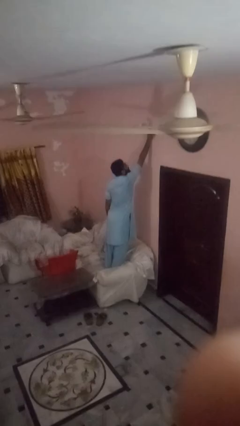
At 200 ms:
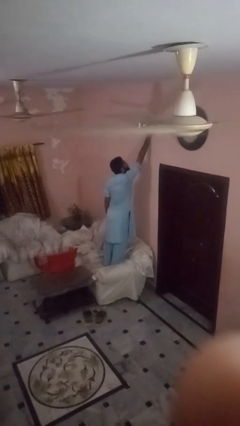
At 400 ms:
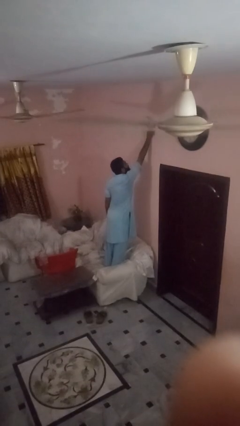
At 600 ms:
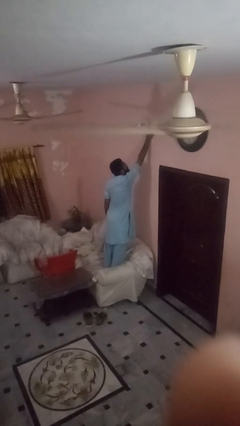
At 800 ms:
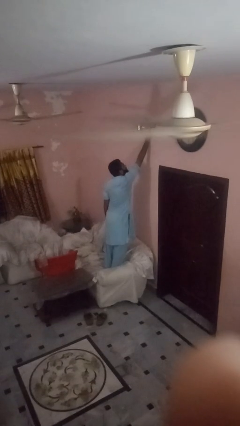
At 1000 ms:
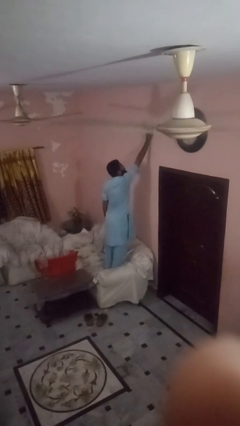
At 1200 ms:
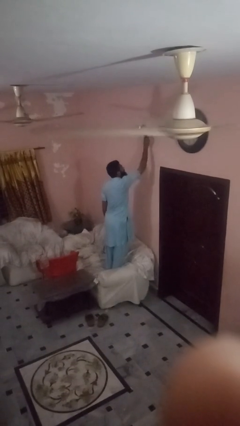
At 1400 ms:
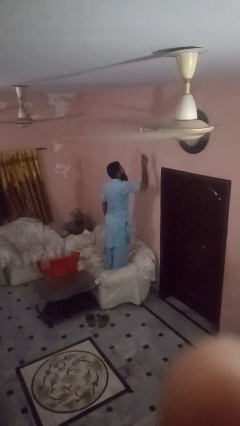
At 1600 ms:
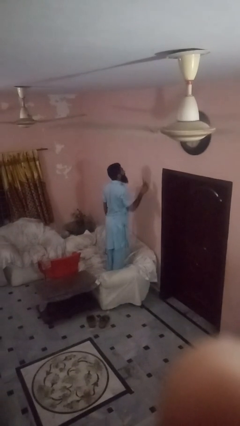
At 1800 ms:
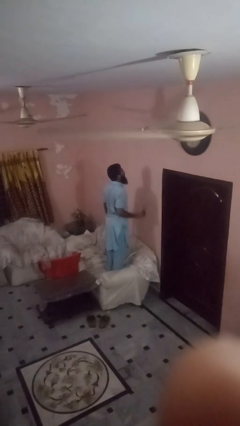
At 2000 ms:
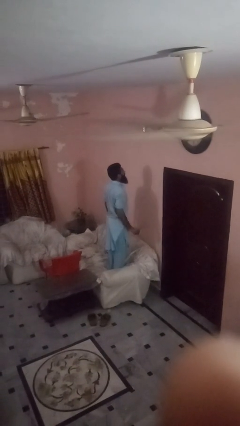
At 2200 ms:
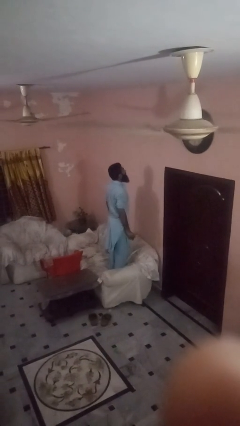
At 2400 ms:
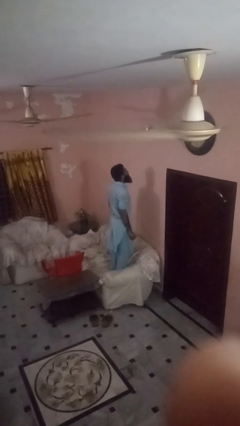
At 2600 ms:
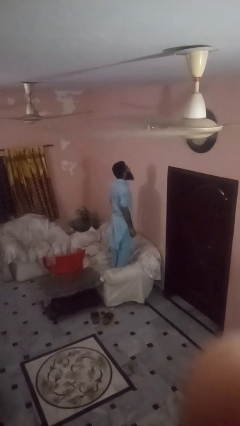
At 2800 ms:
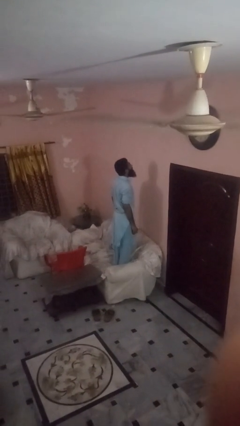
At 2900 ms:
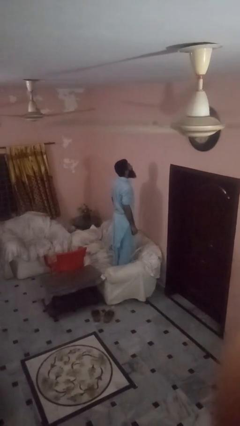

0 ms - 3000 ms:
person takes down smoke detector

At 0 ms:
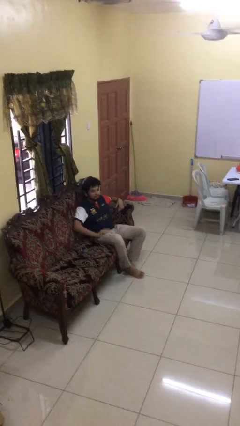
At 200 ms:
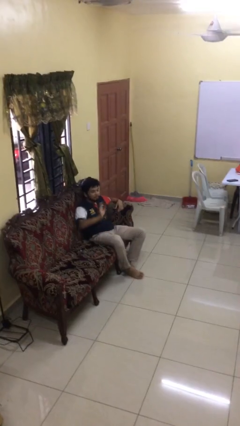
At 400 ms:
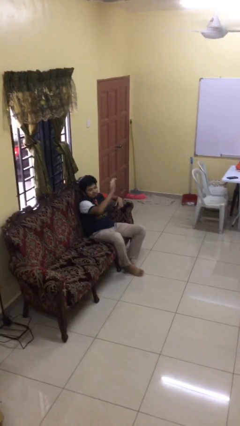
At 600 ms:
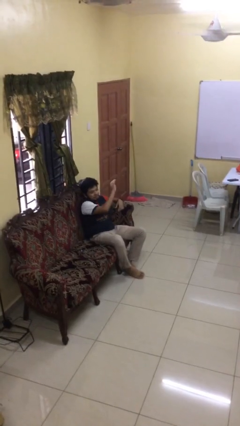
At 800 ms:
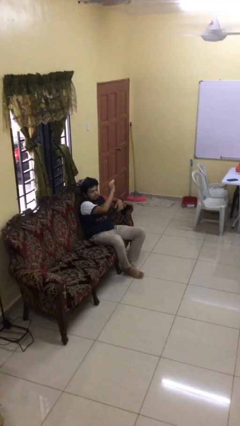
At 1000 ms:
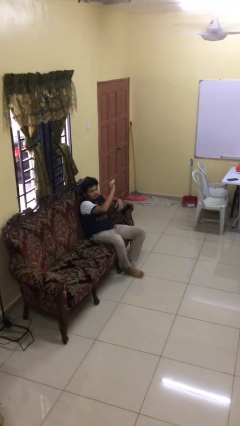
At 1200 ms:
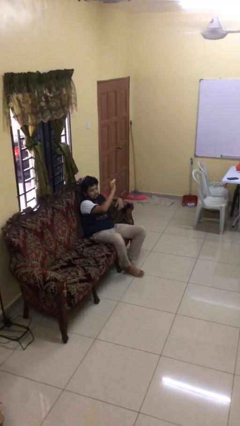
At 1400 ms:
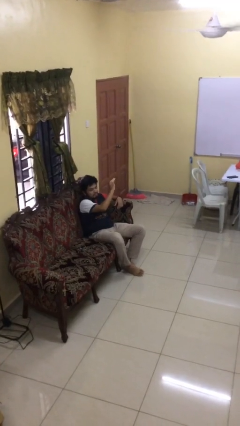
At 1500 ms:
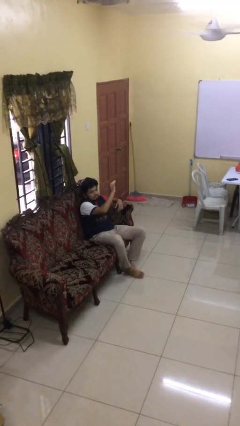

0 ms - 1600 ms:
person gestures swipe left

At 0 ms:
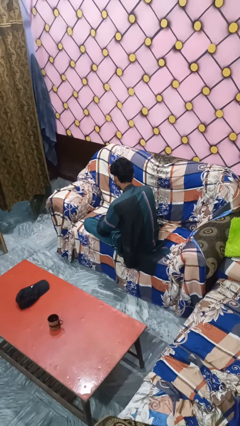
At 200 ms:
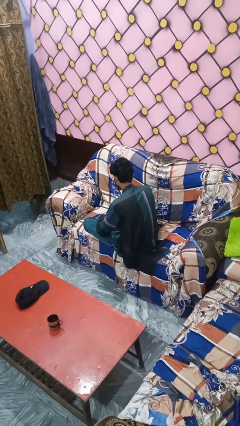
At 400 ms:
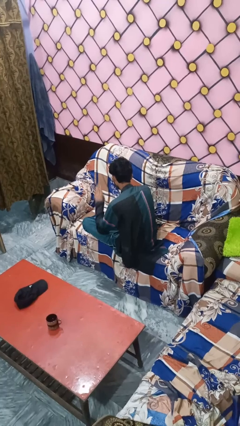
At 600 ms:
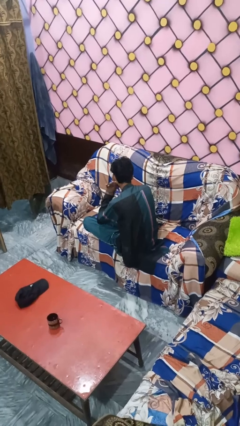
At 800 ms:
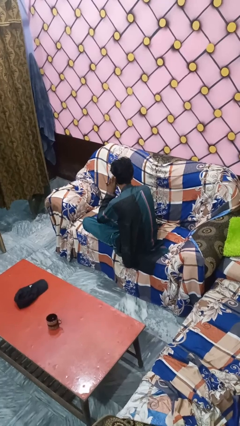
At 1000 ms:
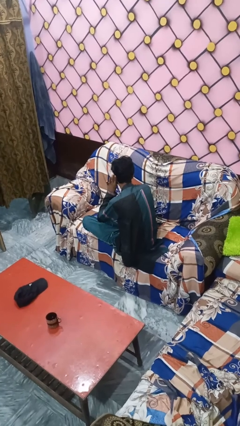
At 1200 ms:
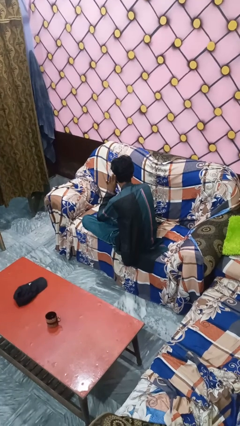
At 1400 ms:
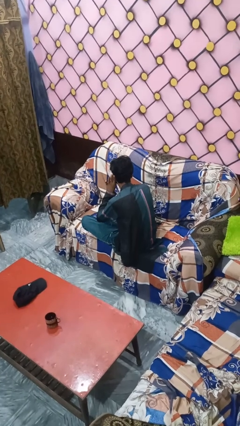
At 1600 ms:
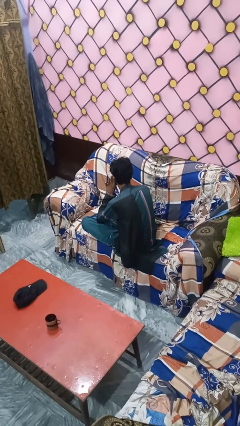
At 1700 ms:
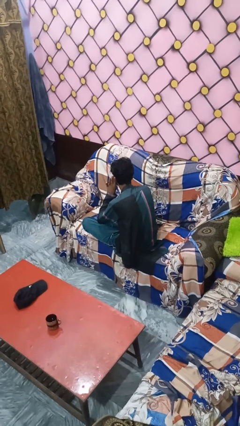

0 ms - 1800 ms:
person gestures listen closely

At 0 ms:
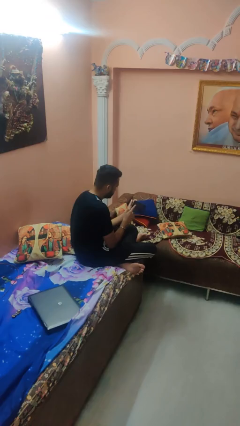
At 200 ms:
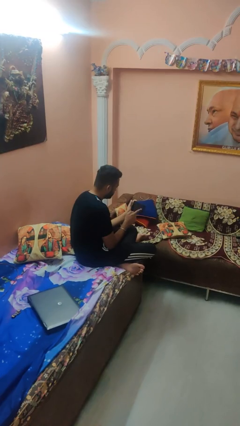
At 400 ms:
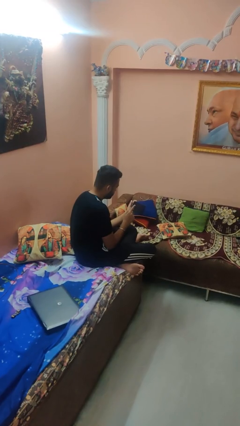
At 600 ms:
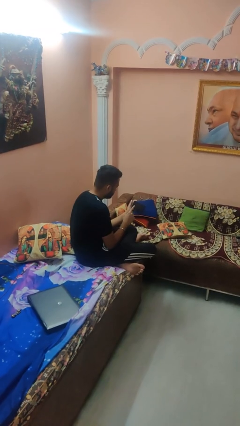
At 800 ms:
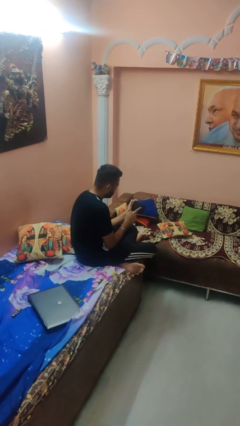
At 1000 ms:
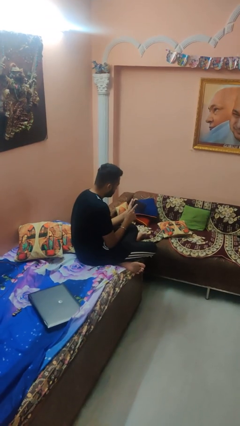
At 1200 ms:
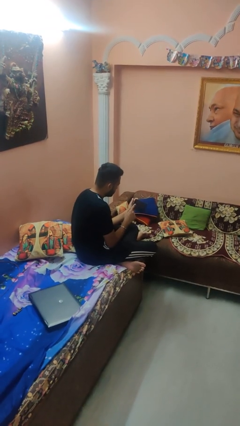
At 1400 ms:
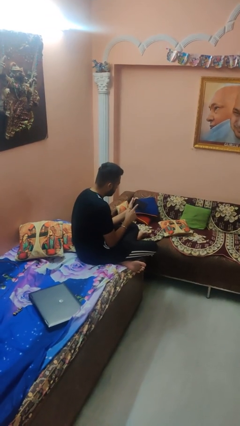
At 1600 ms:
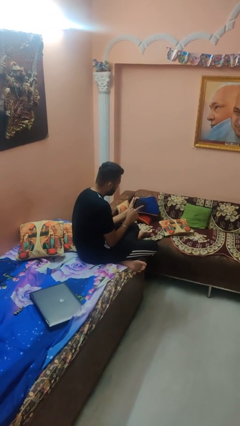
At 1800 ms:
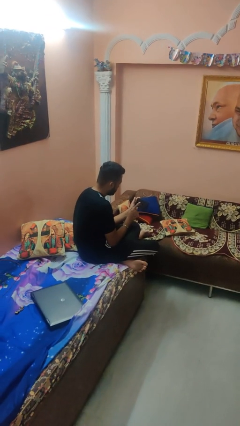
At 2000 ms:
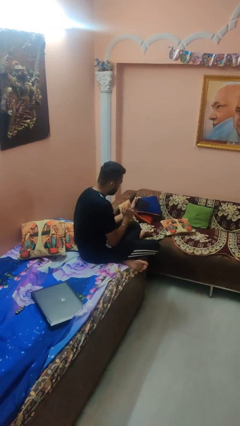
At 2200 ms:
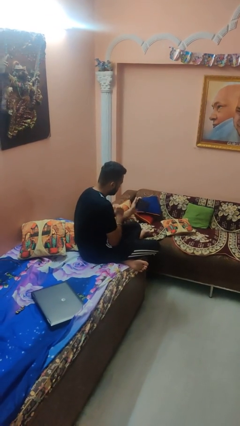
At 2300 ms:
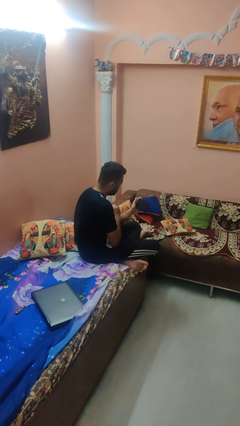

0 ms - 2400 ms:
person interacts with tablet

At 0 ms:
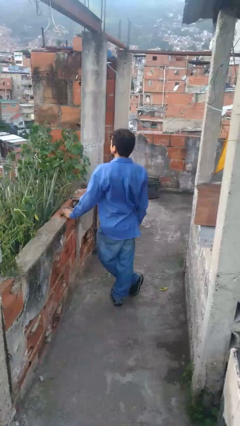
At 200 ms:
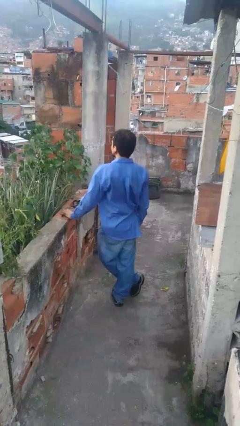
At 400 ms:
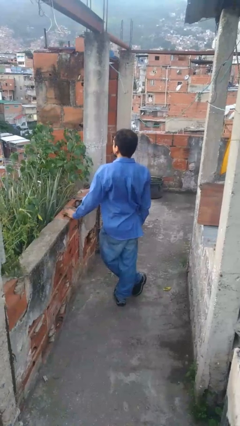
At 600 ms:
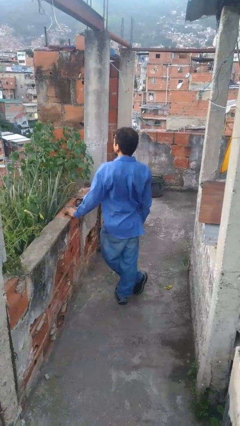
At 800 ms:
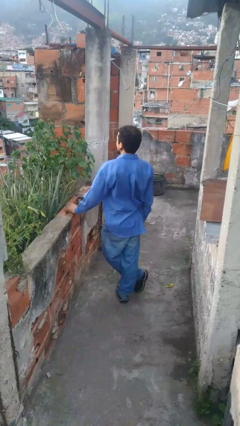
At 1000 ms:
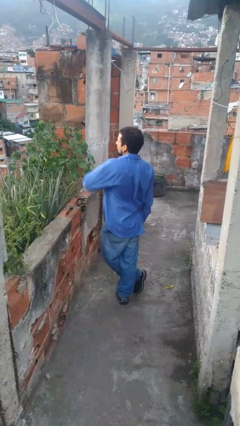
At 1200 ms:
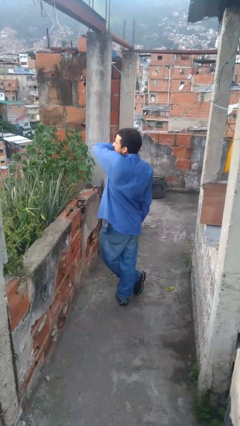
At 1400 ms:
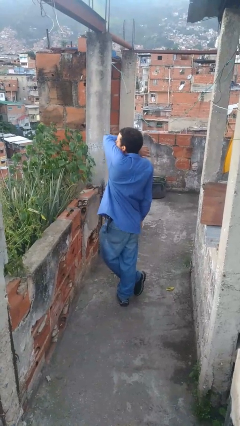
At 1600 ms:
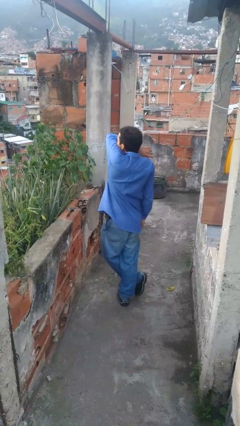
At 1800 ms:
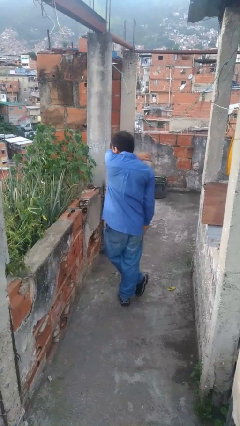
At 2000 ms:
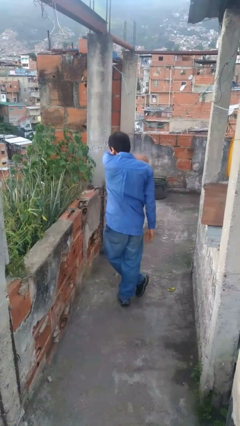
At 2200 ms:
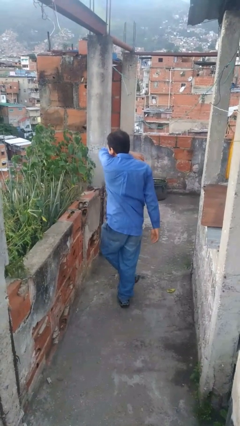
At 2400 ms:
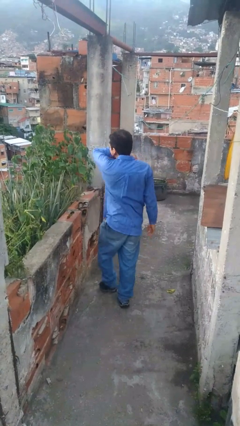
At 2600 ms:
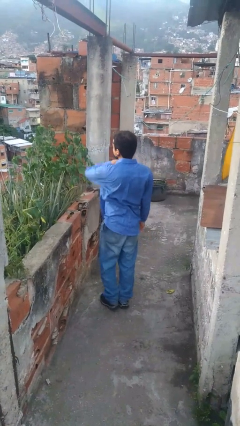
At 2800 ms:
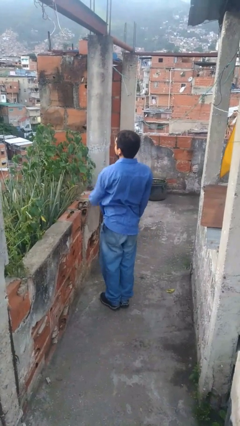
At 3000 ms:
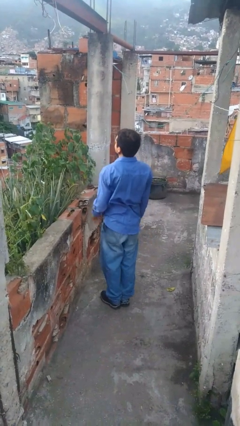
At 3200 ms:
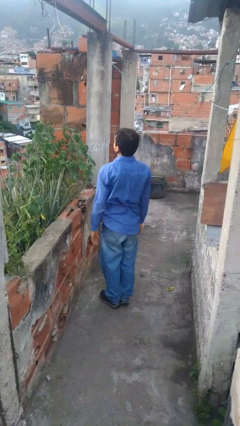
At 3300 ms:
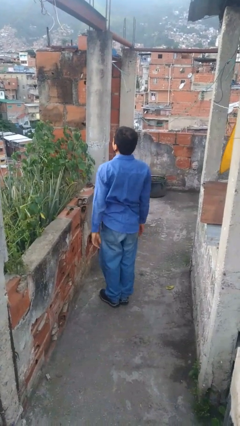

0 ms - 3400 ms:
person sneezes into arm

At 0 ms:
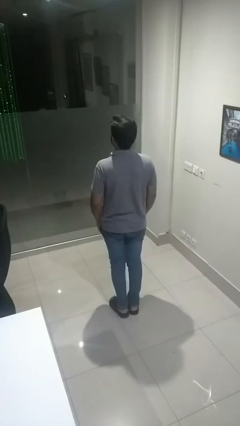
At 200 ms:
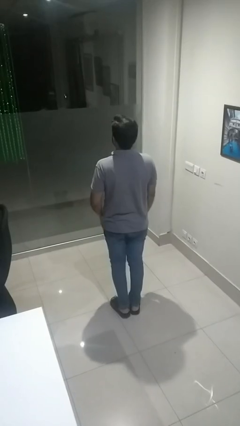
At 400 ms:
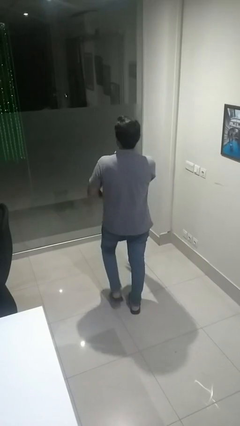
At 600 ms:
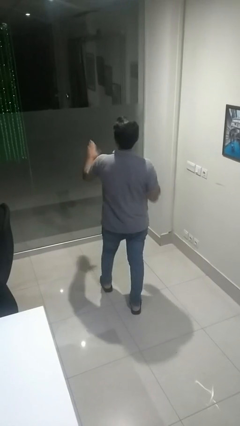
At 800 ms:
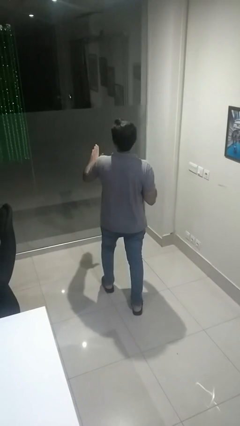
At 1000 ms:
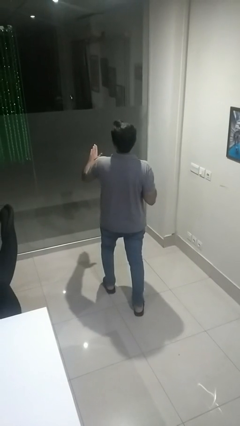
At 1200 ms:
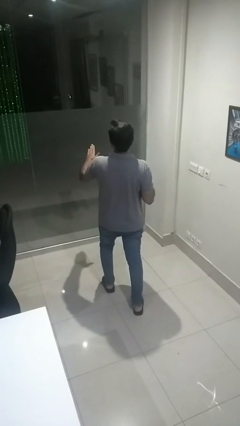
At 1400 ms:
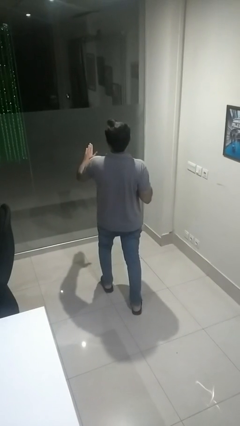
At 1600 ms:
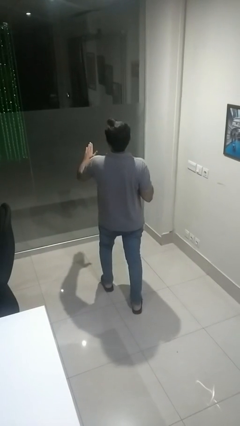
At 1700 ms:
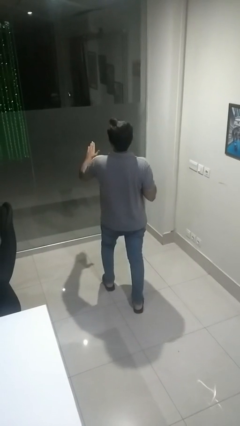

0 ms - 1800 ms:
person karate chop

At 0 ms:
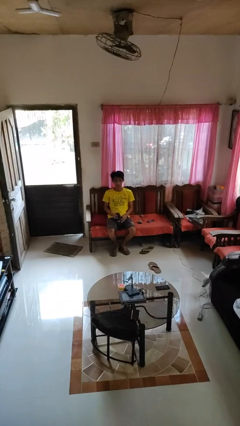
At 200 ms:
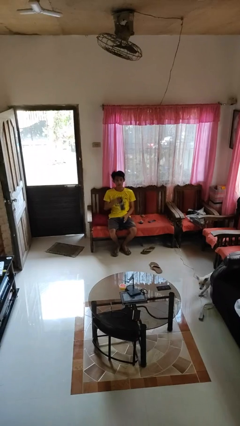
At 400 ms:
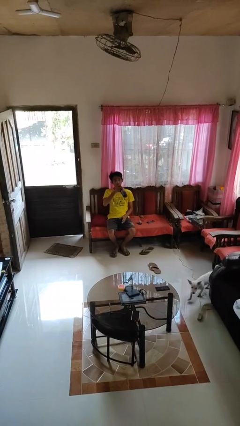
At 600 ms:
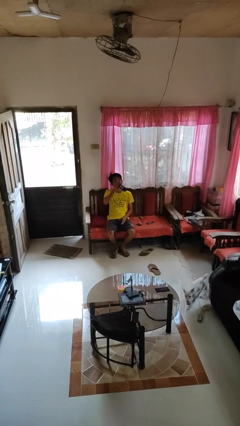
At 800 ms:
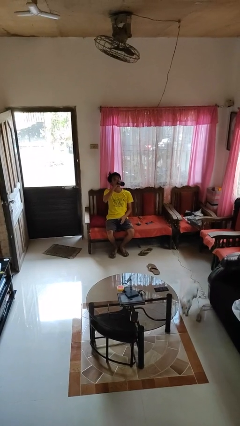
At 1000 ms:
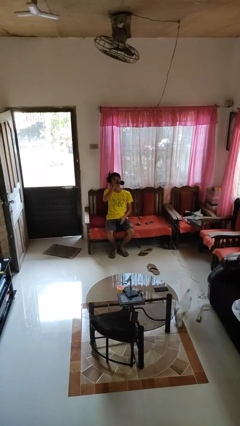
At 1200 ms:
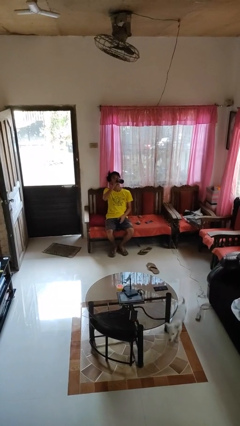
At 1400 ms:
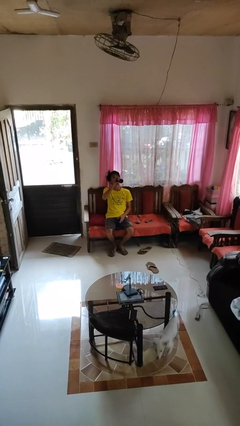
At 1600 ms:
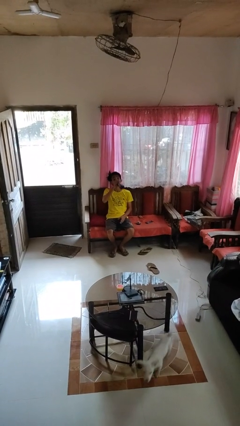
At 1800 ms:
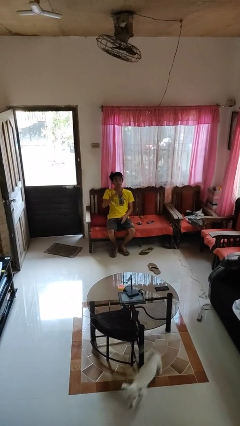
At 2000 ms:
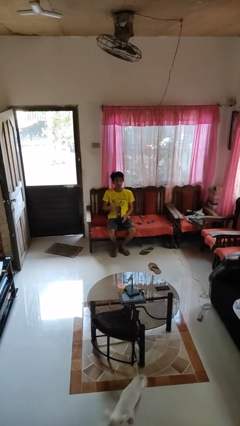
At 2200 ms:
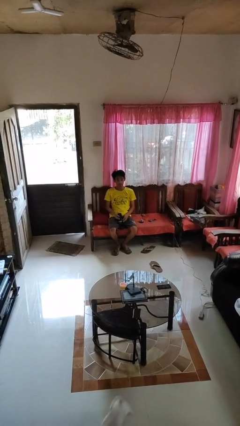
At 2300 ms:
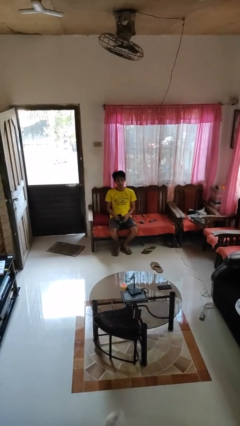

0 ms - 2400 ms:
person drinks from bottle

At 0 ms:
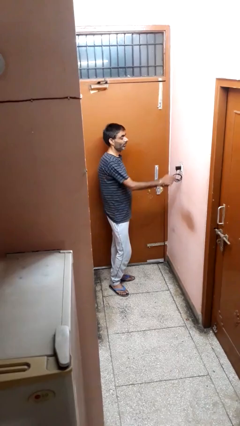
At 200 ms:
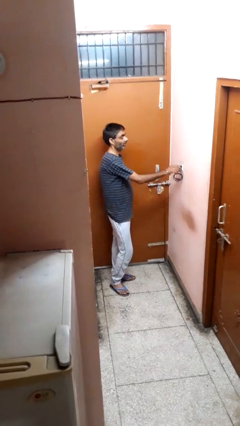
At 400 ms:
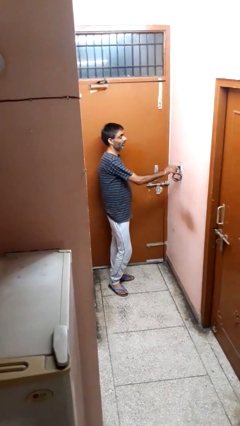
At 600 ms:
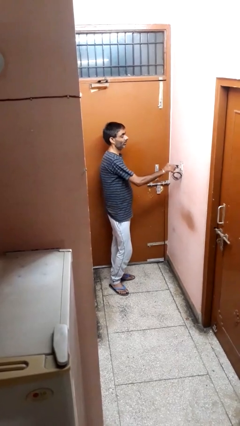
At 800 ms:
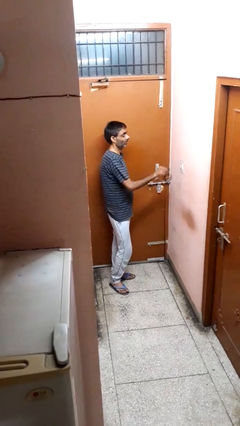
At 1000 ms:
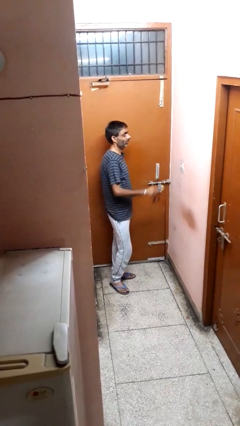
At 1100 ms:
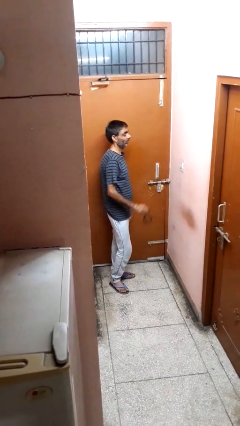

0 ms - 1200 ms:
person unplugs from electrical socket
